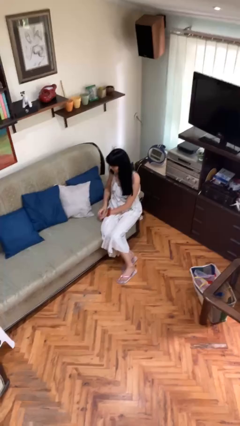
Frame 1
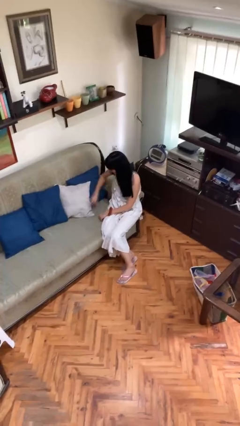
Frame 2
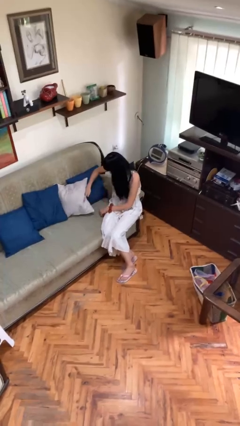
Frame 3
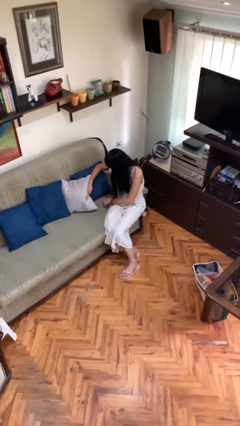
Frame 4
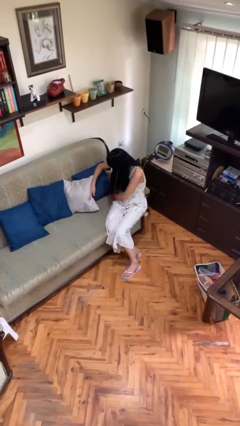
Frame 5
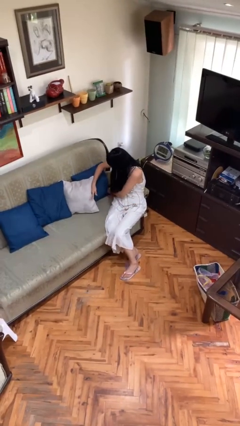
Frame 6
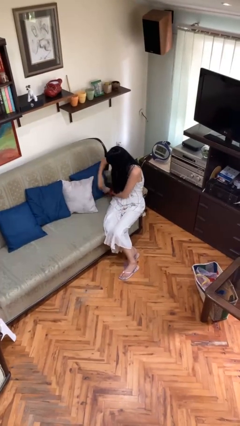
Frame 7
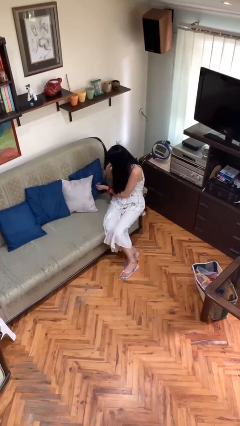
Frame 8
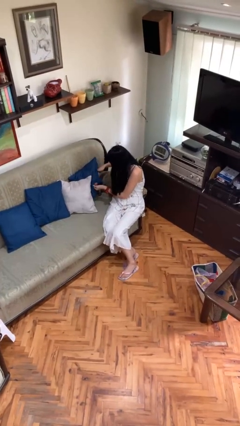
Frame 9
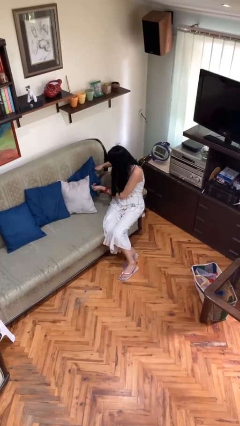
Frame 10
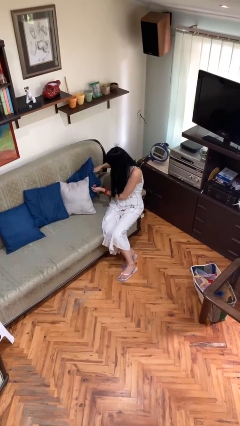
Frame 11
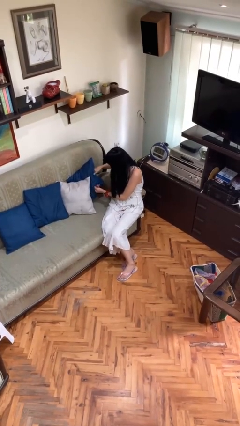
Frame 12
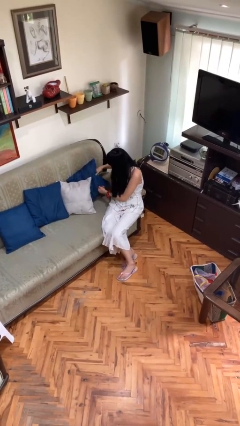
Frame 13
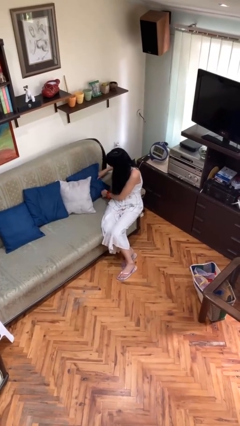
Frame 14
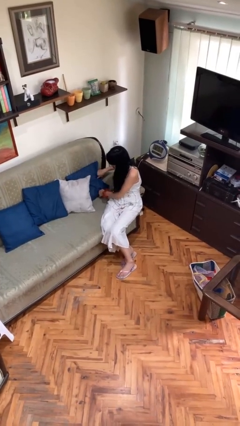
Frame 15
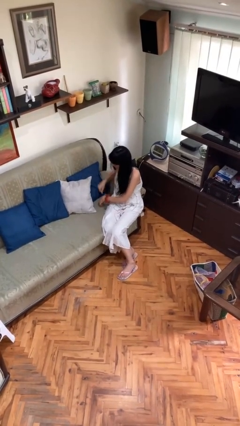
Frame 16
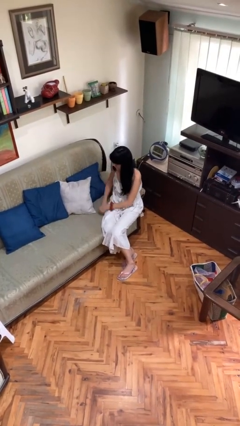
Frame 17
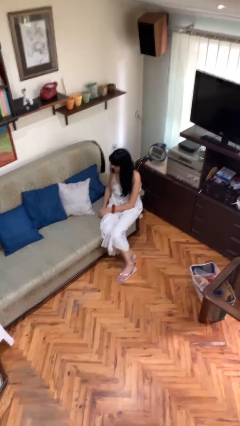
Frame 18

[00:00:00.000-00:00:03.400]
person searches in couch

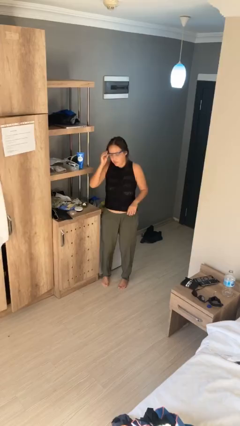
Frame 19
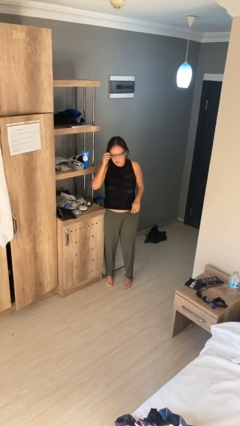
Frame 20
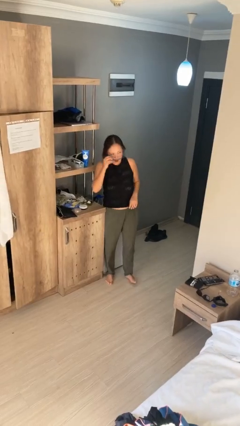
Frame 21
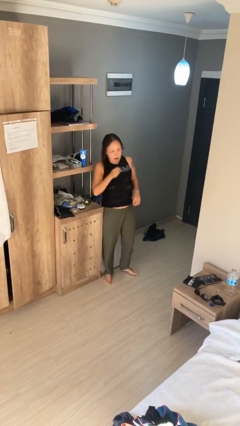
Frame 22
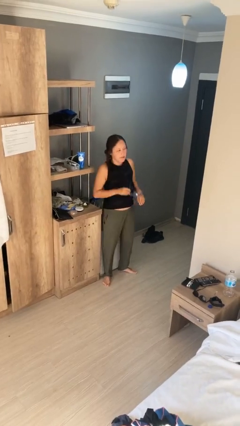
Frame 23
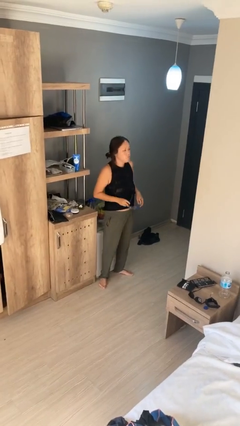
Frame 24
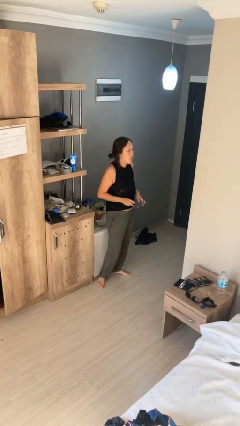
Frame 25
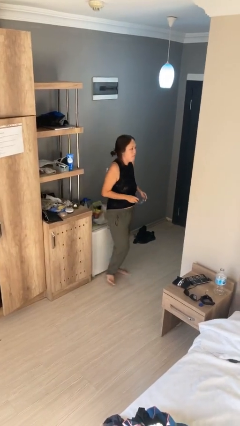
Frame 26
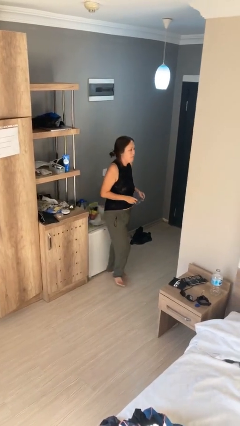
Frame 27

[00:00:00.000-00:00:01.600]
person takes off glasses

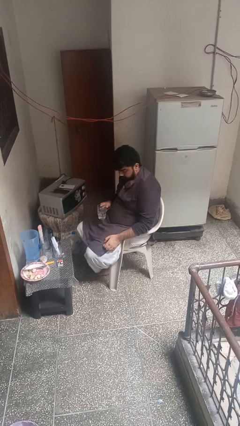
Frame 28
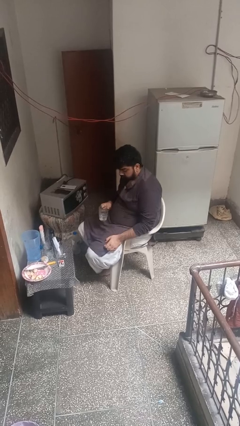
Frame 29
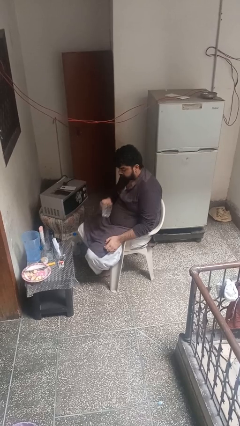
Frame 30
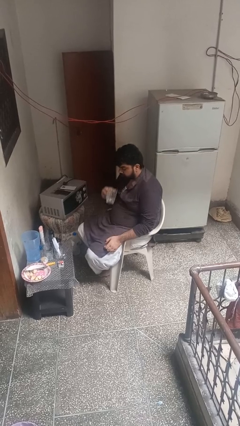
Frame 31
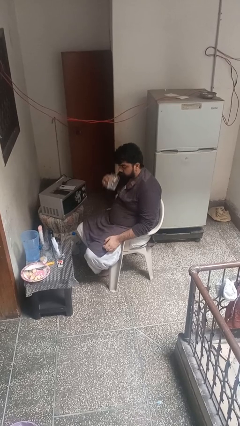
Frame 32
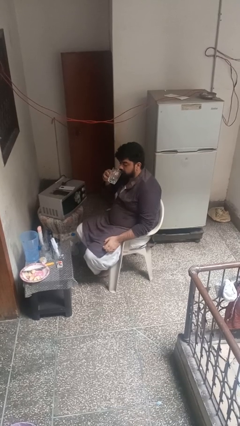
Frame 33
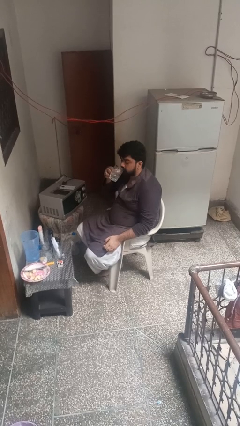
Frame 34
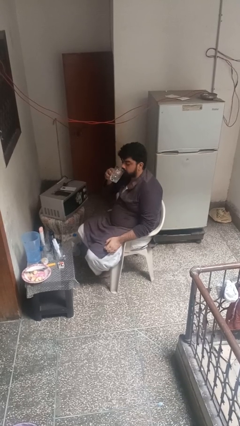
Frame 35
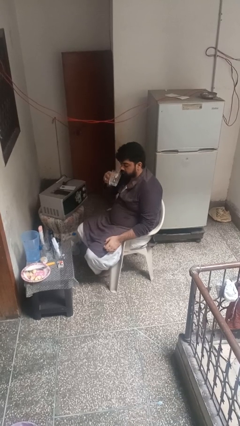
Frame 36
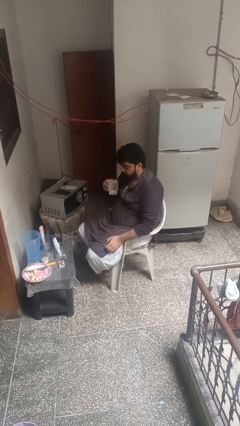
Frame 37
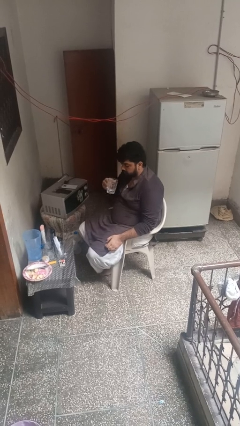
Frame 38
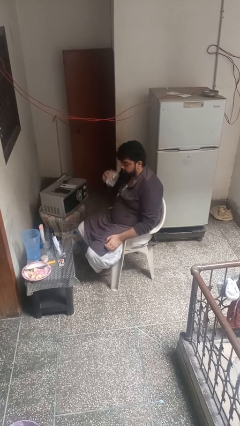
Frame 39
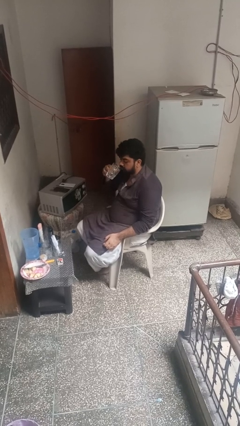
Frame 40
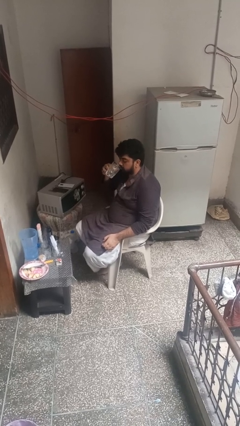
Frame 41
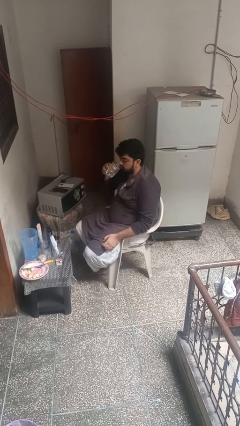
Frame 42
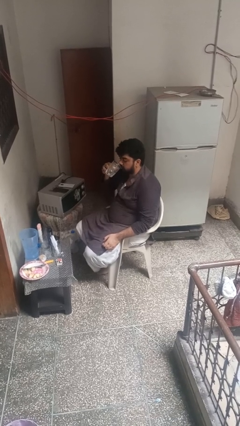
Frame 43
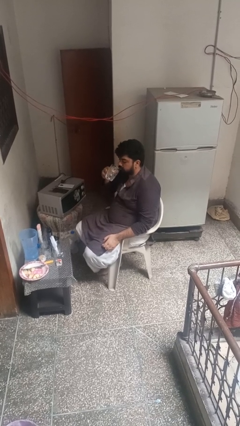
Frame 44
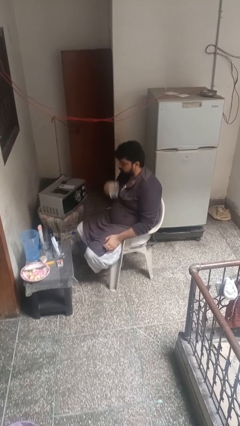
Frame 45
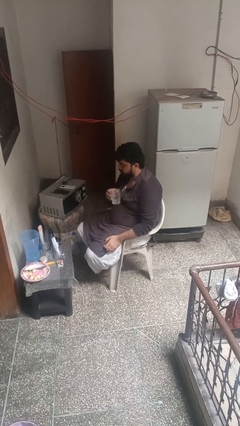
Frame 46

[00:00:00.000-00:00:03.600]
person drinks from mug

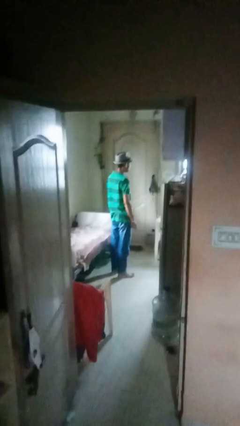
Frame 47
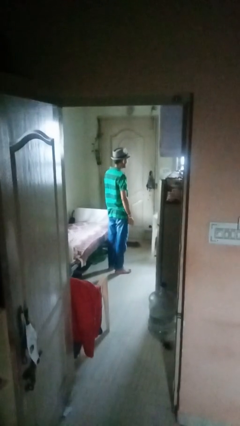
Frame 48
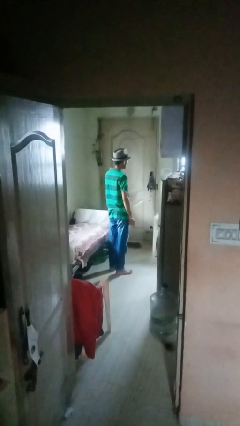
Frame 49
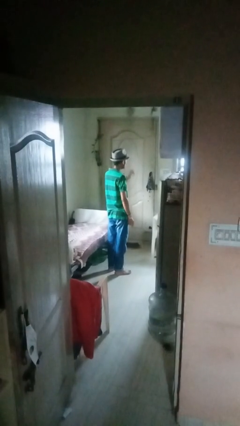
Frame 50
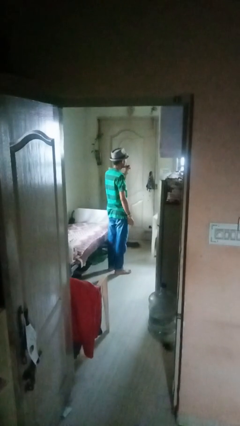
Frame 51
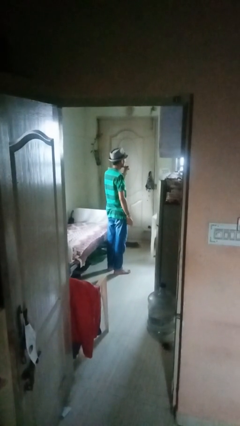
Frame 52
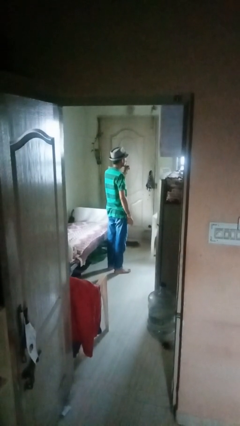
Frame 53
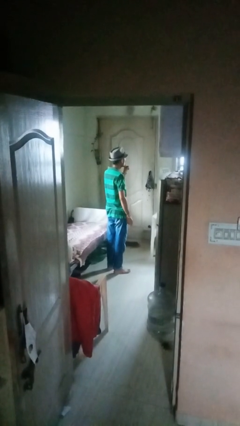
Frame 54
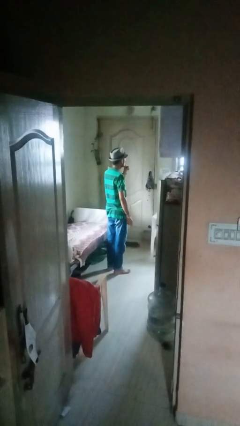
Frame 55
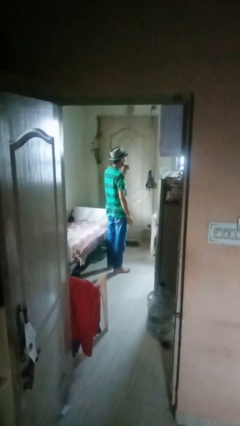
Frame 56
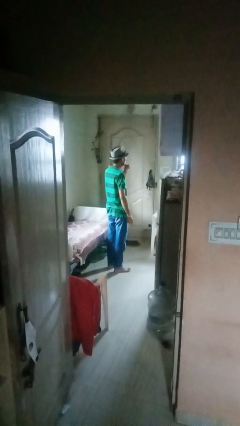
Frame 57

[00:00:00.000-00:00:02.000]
person gestures be quiet

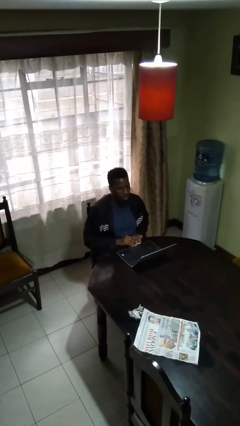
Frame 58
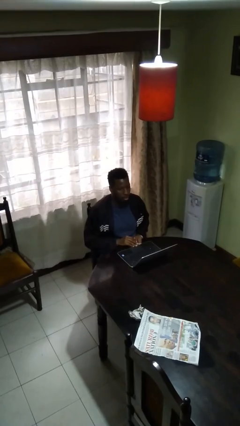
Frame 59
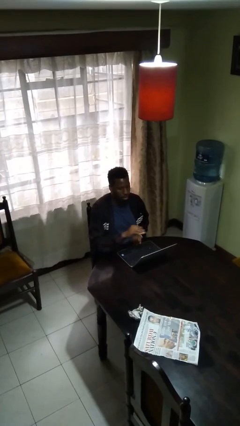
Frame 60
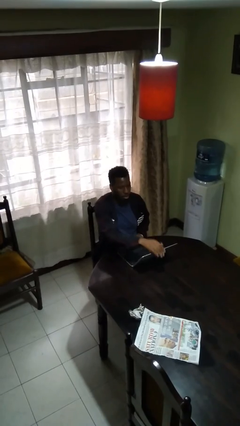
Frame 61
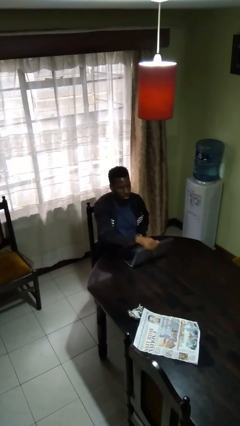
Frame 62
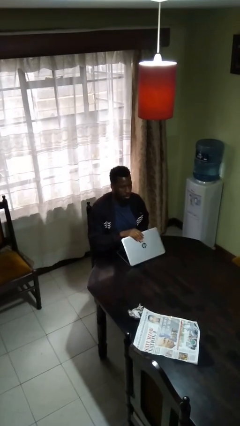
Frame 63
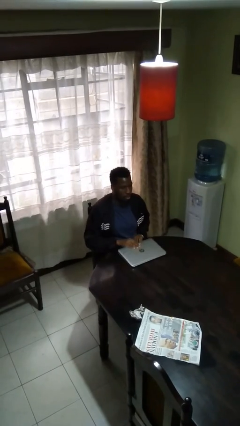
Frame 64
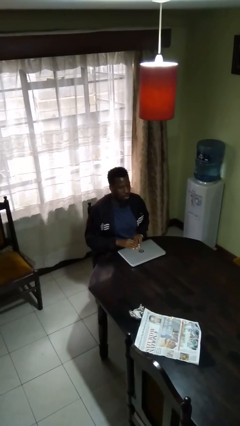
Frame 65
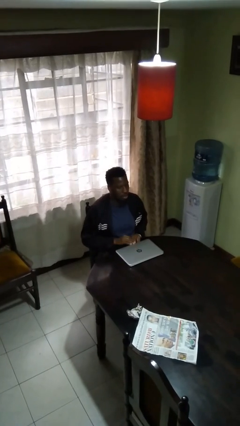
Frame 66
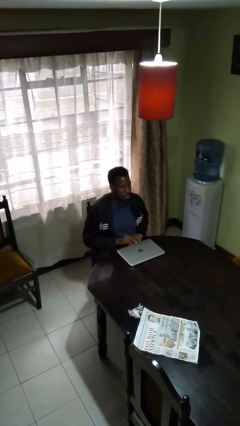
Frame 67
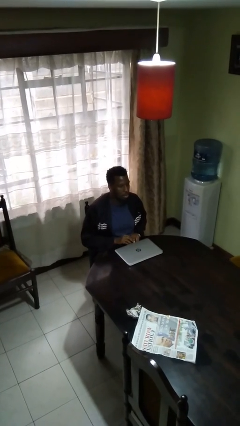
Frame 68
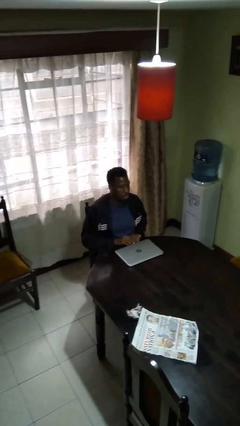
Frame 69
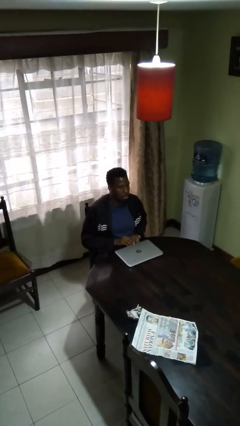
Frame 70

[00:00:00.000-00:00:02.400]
person closes laptop

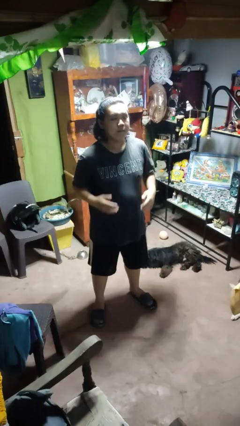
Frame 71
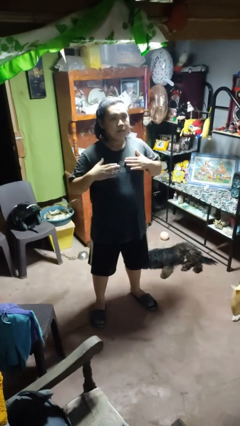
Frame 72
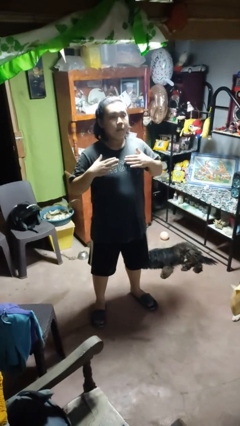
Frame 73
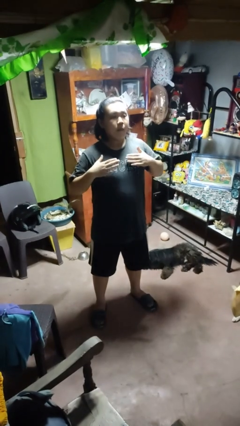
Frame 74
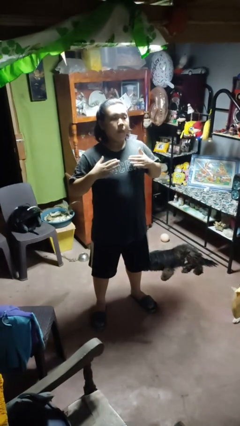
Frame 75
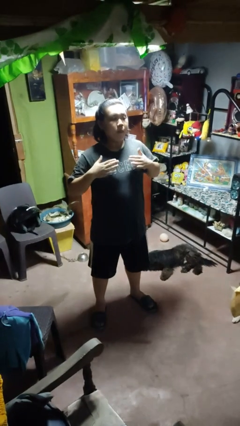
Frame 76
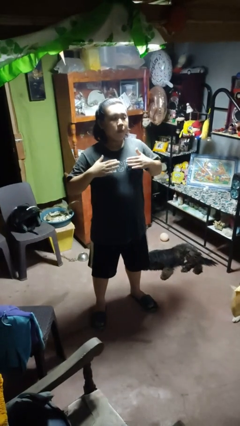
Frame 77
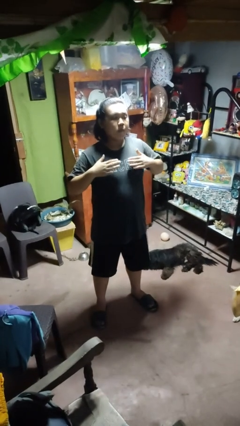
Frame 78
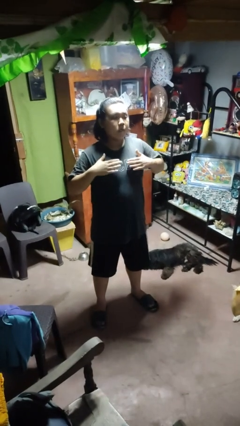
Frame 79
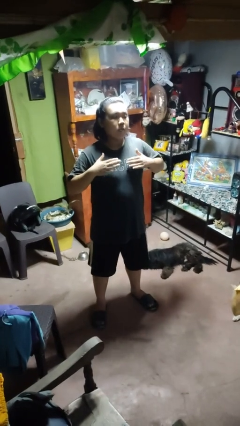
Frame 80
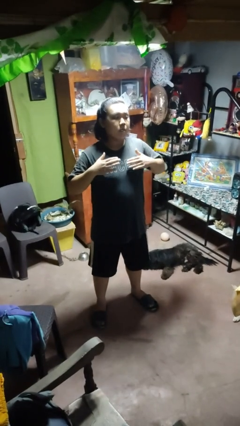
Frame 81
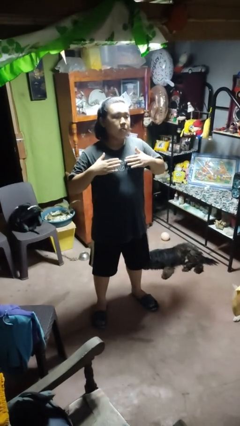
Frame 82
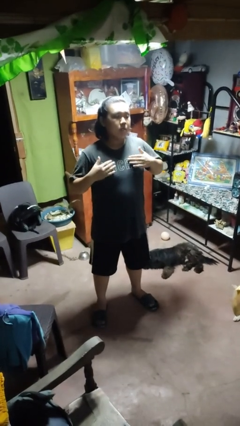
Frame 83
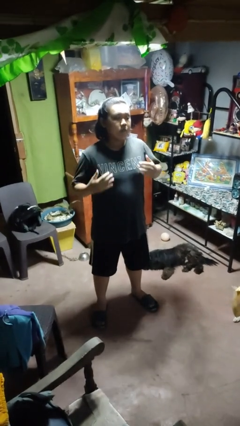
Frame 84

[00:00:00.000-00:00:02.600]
person drums on chest

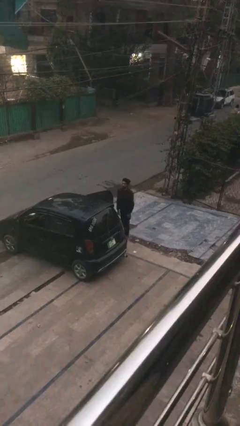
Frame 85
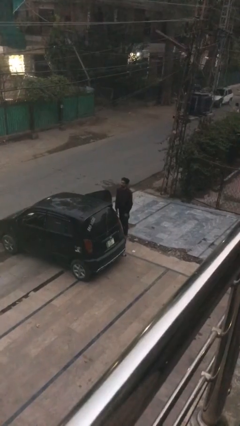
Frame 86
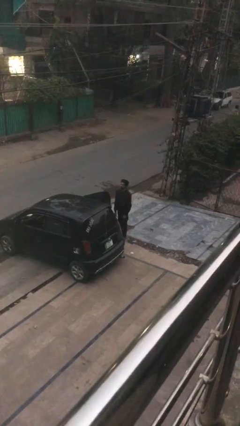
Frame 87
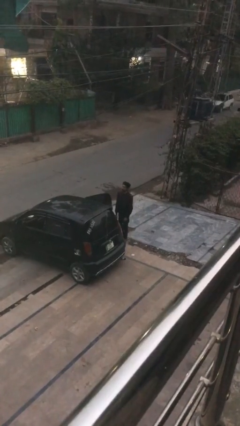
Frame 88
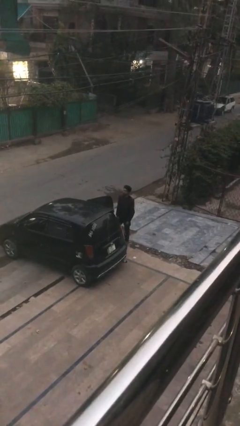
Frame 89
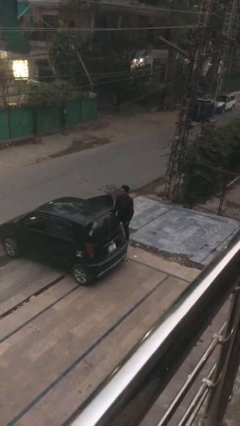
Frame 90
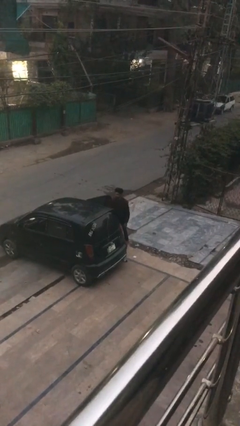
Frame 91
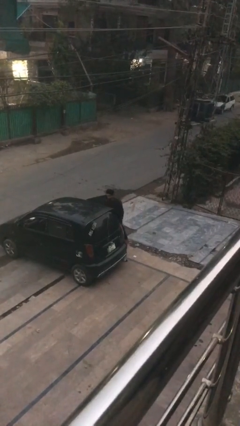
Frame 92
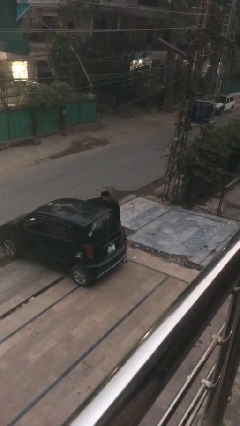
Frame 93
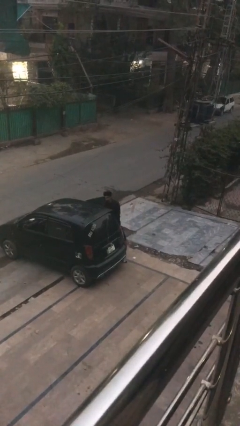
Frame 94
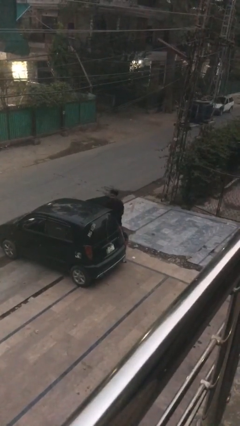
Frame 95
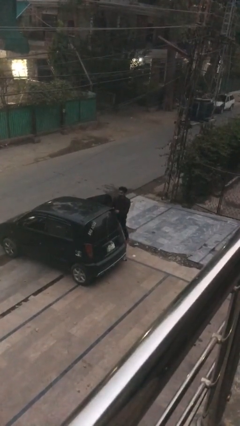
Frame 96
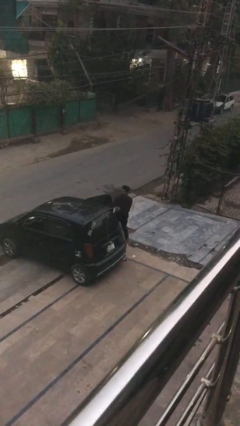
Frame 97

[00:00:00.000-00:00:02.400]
person unloads car
